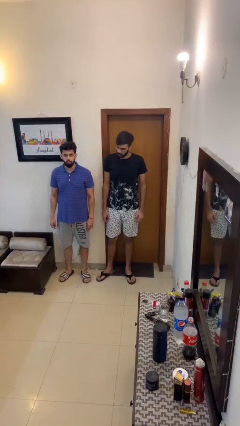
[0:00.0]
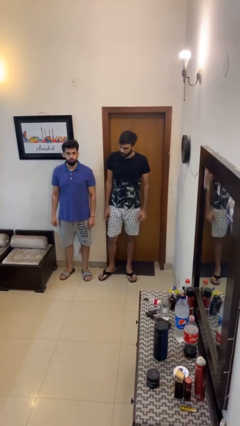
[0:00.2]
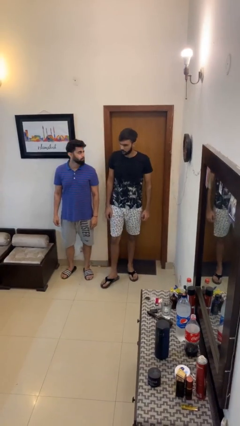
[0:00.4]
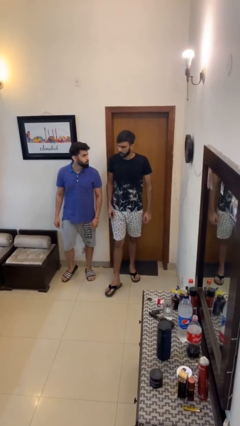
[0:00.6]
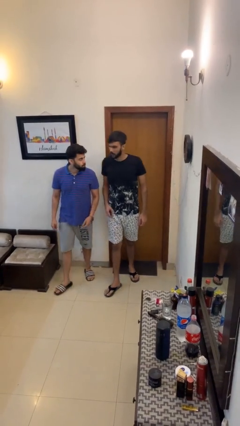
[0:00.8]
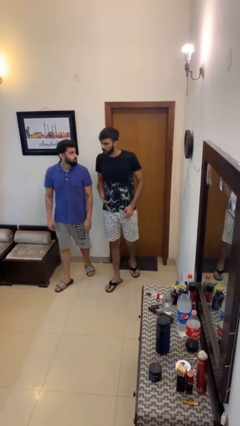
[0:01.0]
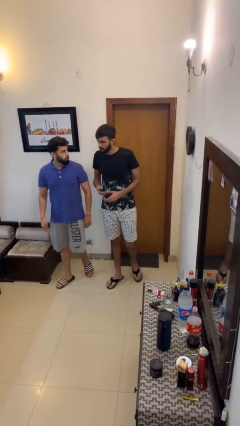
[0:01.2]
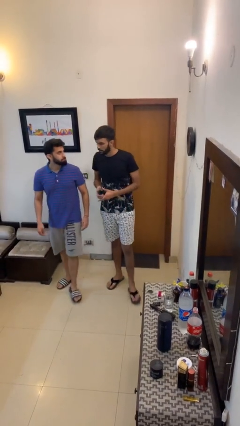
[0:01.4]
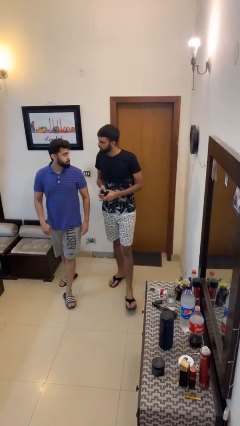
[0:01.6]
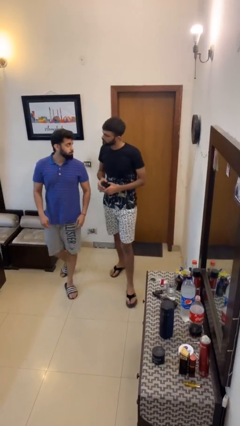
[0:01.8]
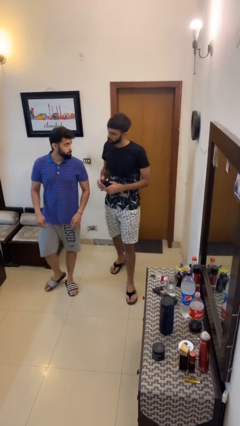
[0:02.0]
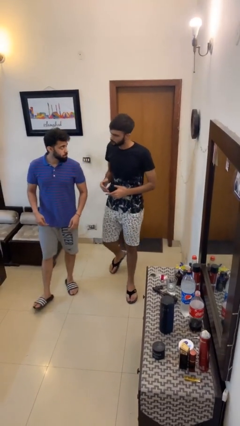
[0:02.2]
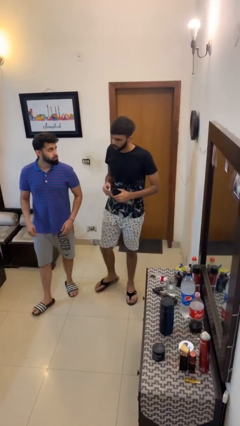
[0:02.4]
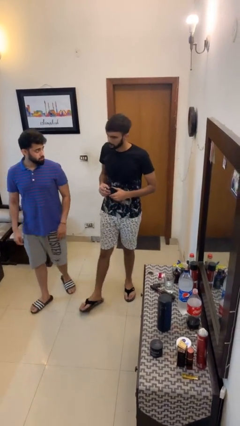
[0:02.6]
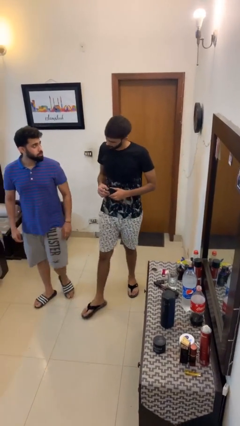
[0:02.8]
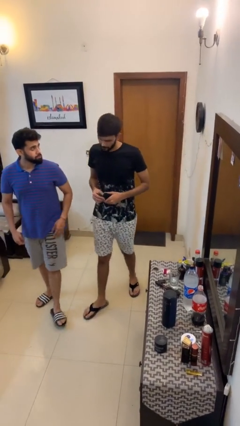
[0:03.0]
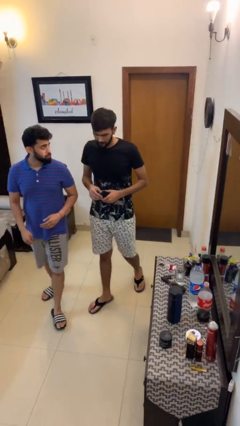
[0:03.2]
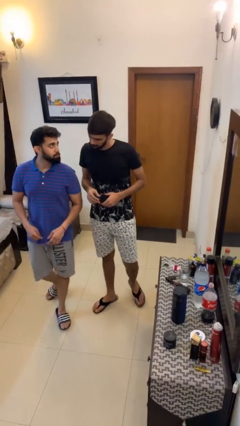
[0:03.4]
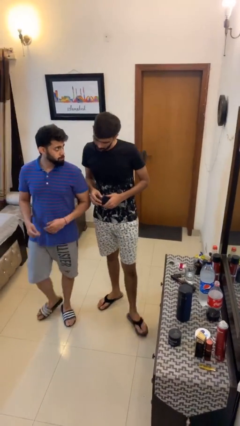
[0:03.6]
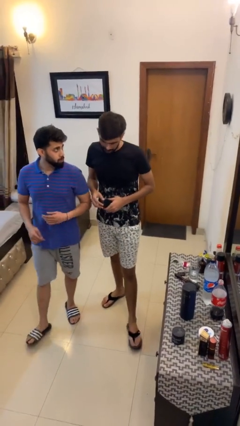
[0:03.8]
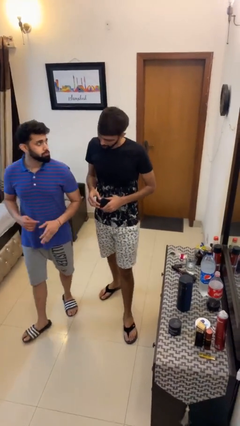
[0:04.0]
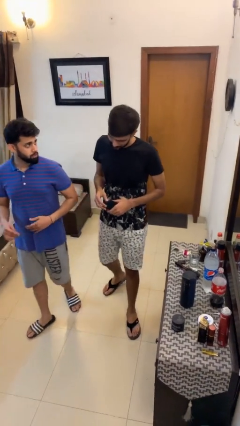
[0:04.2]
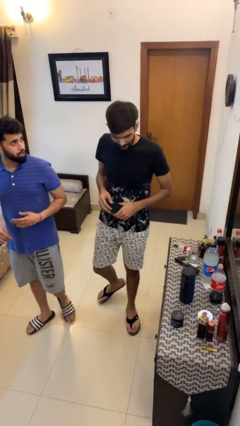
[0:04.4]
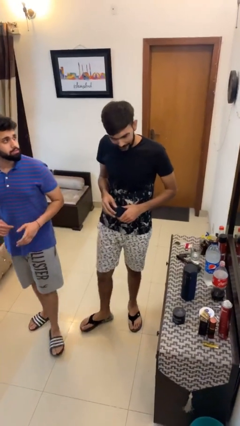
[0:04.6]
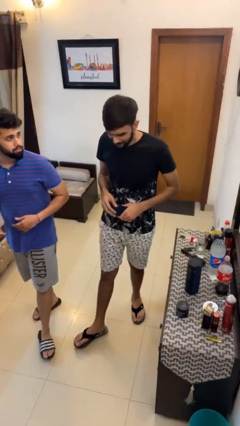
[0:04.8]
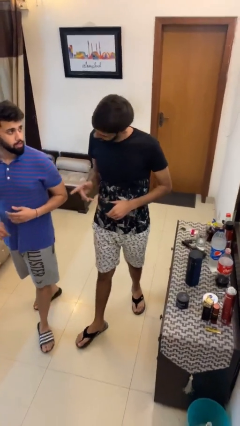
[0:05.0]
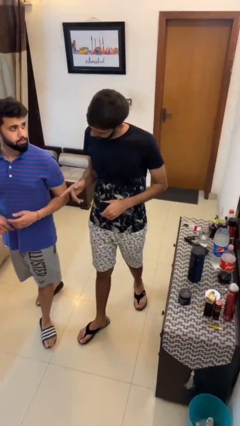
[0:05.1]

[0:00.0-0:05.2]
person talks to person

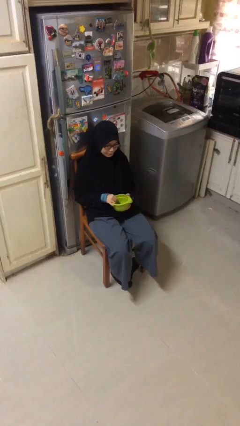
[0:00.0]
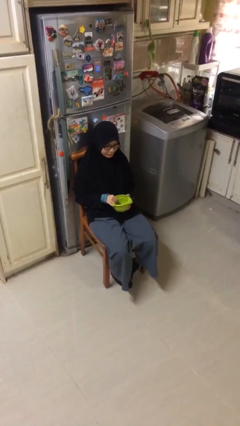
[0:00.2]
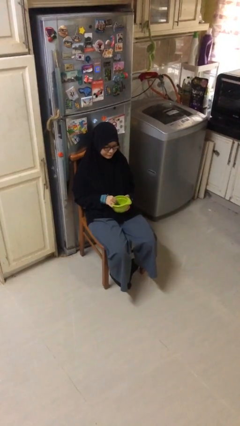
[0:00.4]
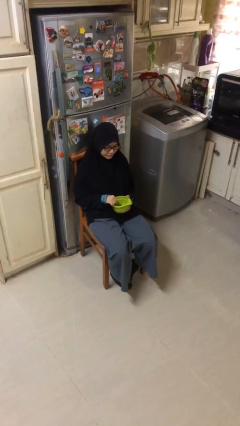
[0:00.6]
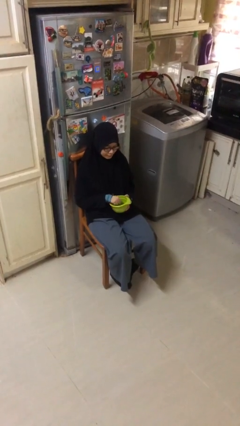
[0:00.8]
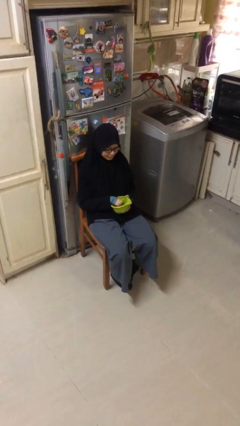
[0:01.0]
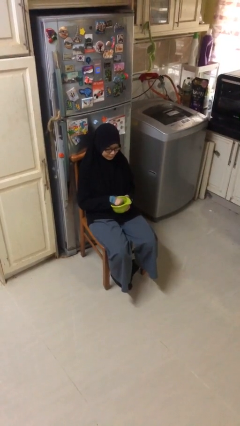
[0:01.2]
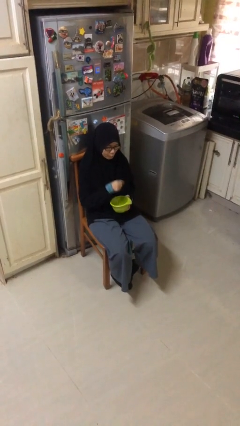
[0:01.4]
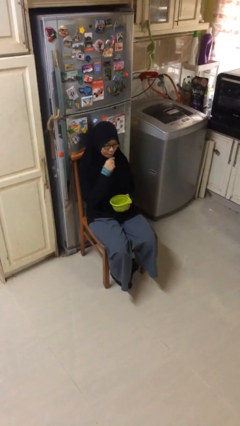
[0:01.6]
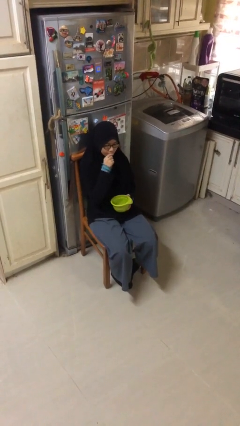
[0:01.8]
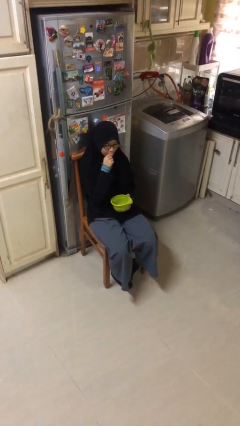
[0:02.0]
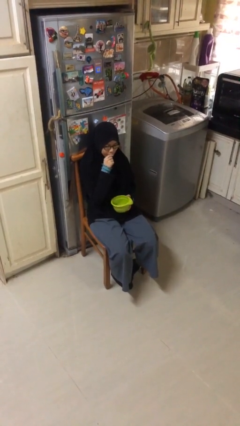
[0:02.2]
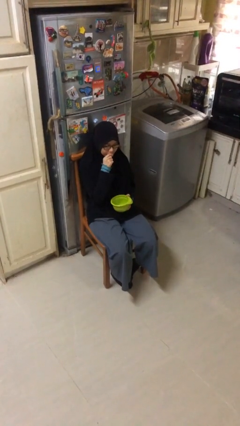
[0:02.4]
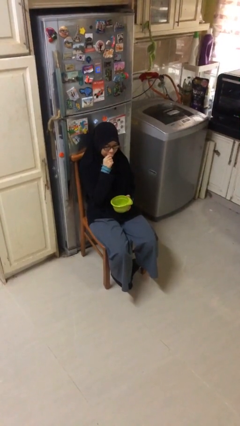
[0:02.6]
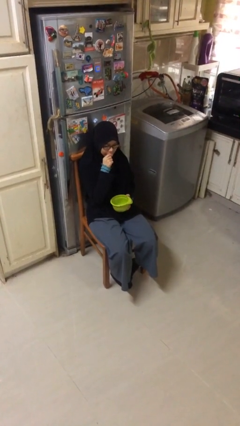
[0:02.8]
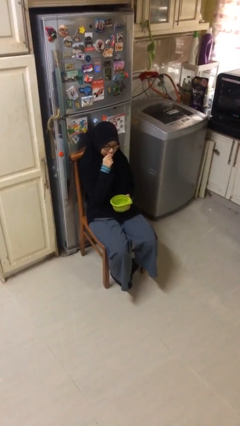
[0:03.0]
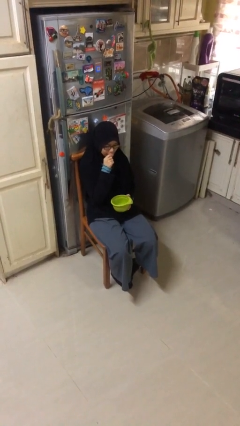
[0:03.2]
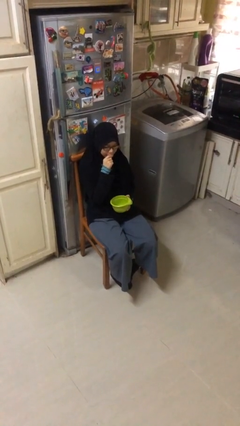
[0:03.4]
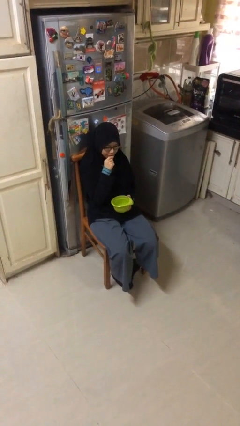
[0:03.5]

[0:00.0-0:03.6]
person eats with hands

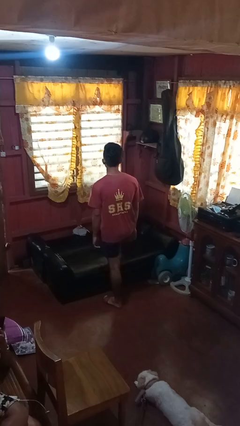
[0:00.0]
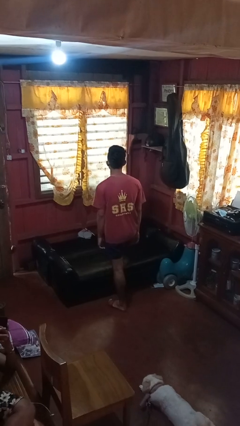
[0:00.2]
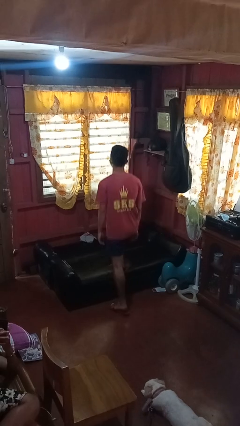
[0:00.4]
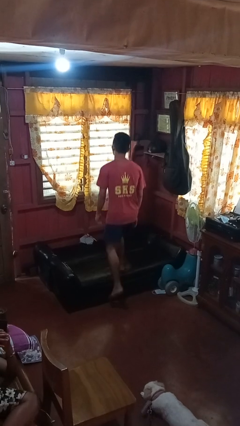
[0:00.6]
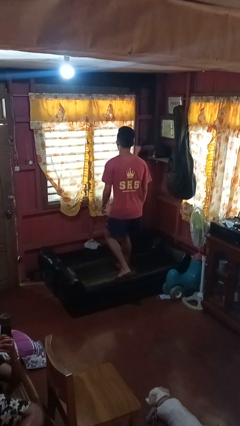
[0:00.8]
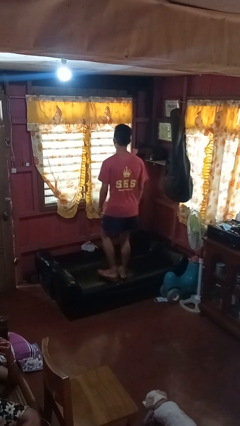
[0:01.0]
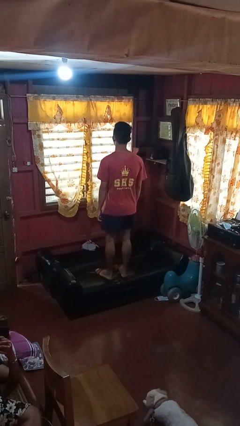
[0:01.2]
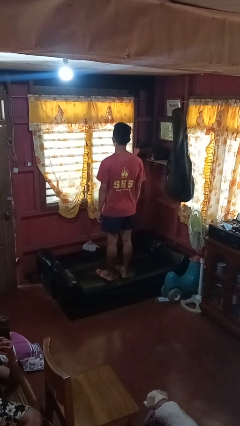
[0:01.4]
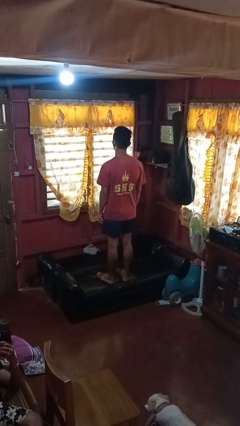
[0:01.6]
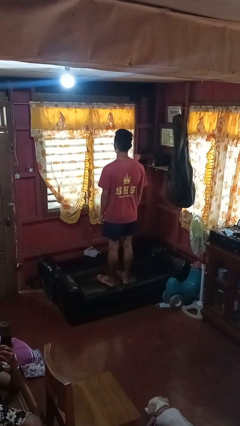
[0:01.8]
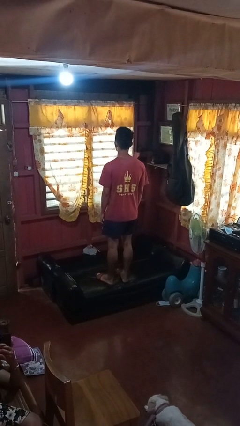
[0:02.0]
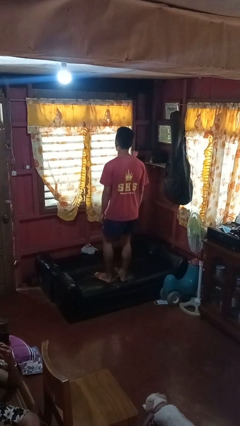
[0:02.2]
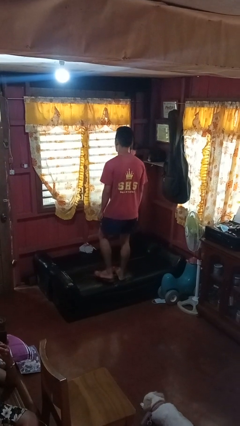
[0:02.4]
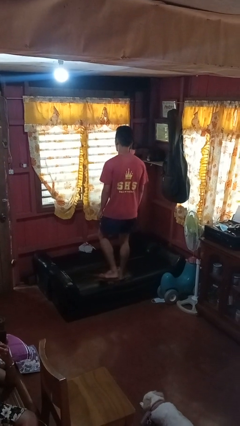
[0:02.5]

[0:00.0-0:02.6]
person climbs on couch

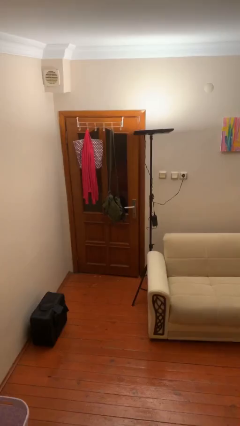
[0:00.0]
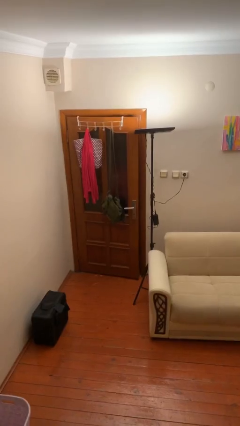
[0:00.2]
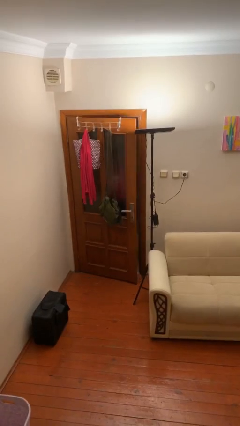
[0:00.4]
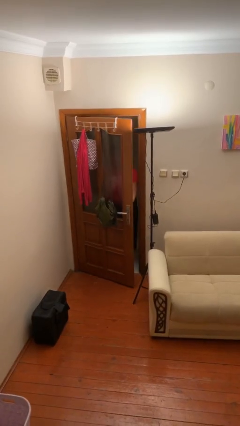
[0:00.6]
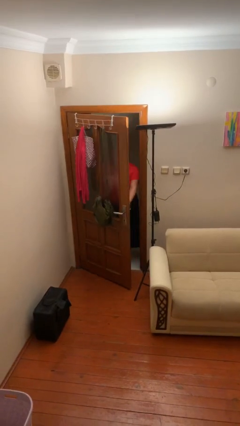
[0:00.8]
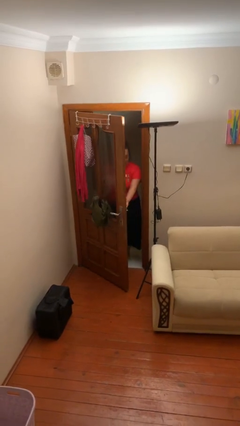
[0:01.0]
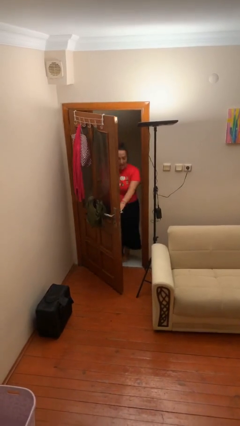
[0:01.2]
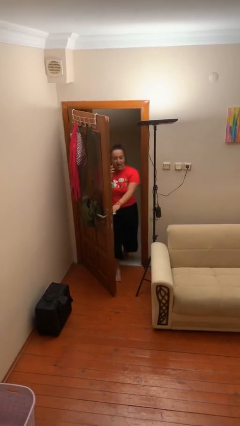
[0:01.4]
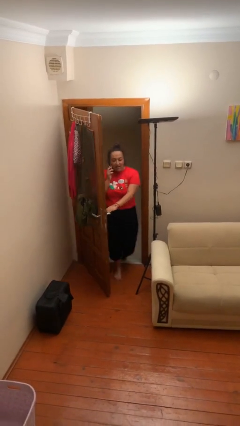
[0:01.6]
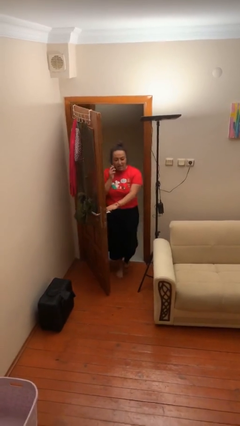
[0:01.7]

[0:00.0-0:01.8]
person opens facility door

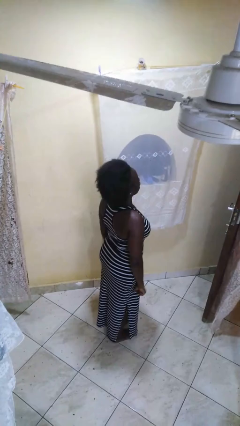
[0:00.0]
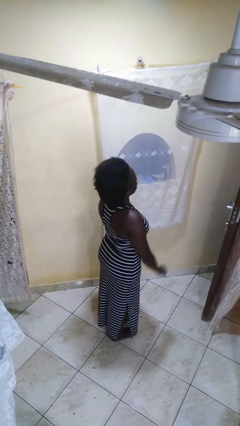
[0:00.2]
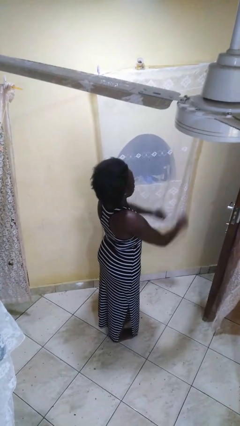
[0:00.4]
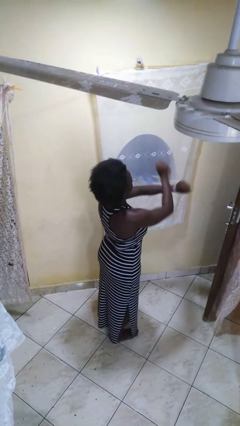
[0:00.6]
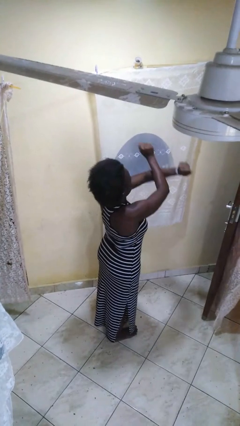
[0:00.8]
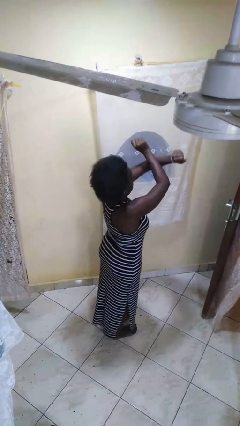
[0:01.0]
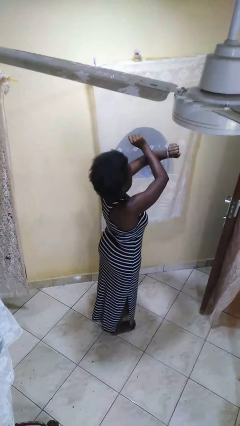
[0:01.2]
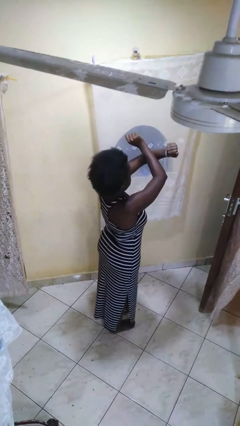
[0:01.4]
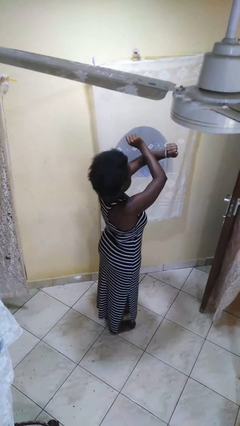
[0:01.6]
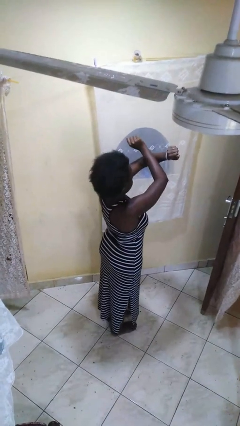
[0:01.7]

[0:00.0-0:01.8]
person gestures arms x

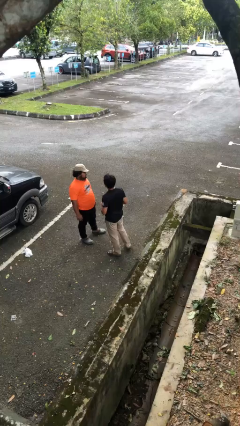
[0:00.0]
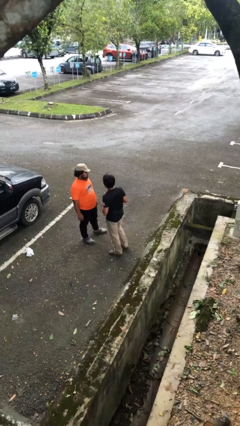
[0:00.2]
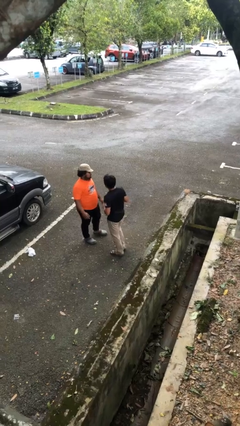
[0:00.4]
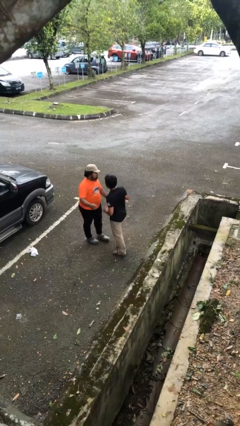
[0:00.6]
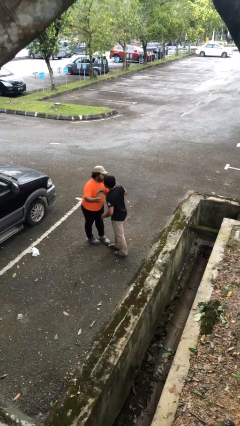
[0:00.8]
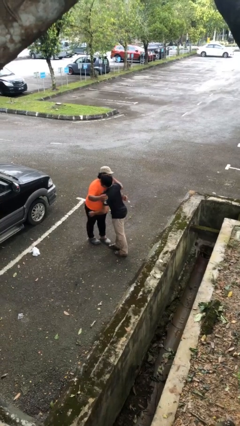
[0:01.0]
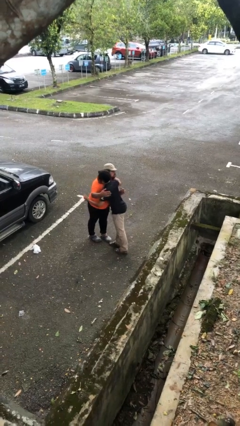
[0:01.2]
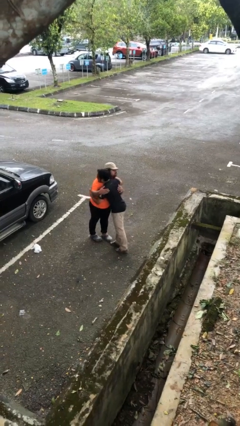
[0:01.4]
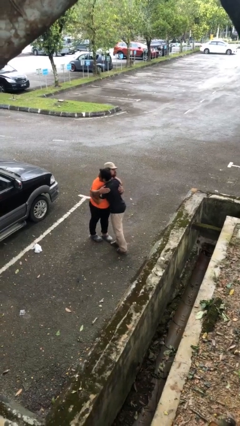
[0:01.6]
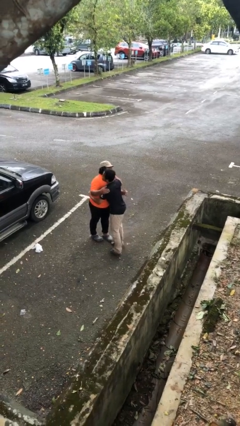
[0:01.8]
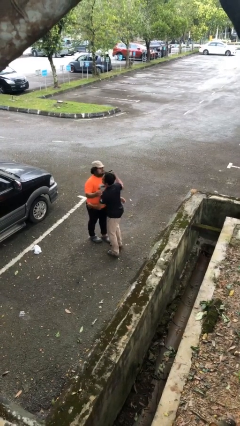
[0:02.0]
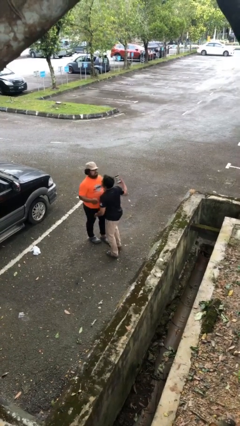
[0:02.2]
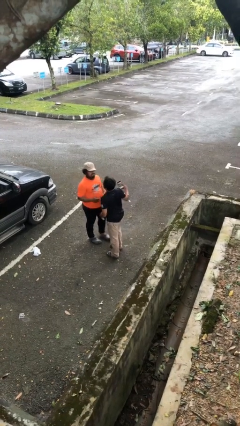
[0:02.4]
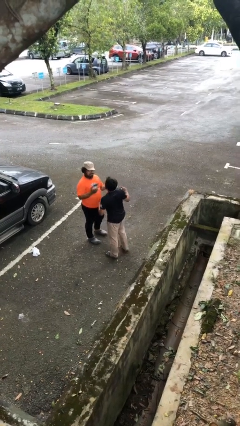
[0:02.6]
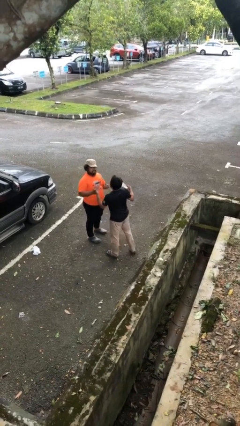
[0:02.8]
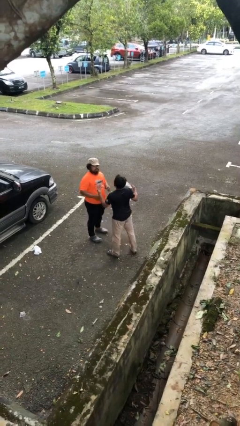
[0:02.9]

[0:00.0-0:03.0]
person embraces person
